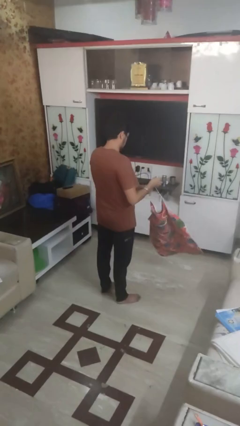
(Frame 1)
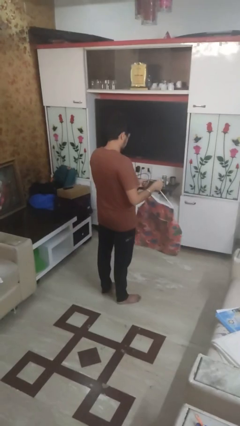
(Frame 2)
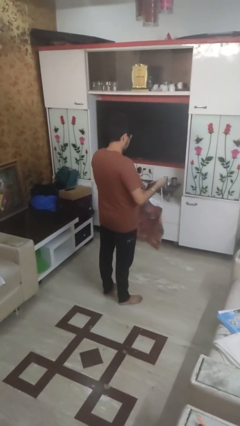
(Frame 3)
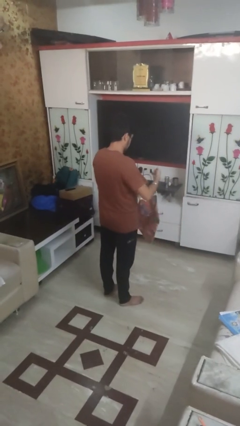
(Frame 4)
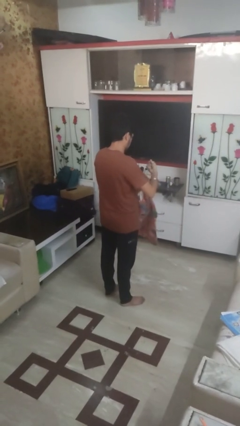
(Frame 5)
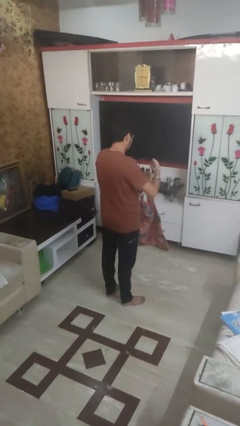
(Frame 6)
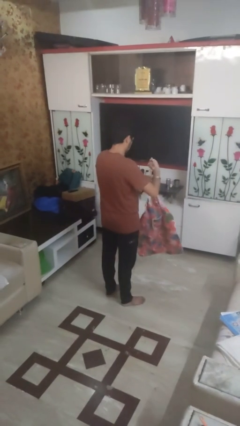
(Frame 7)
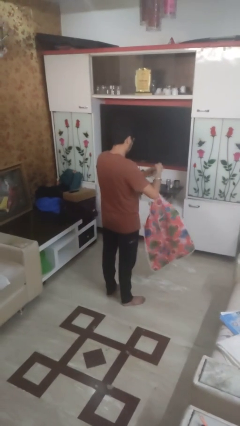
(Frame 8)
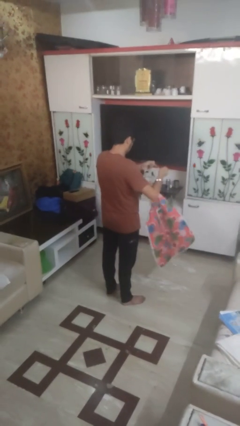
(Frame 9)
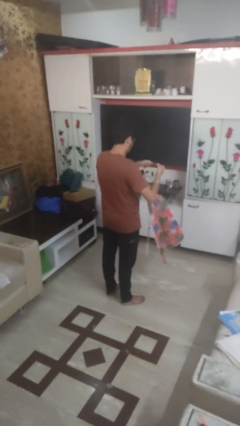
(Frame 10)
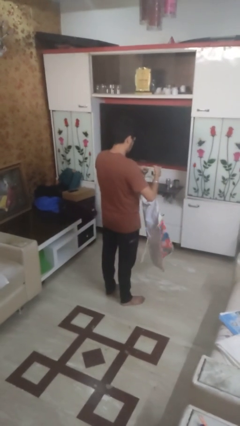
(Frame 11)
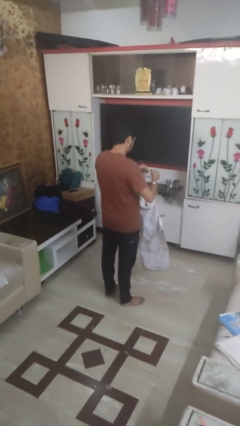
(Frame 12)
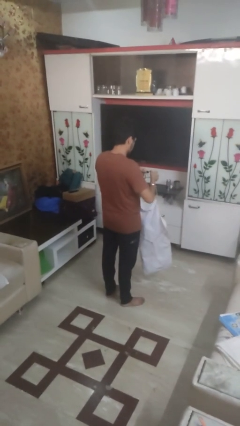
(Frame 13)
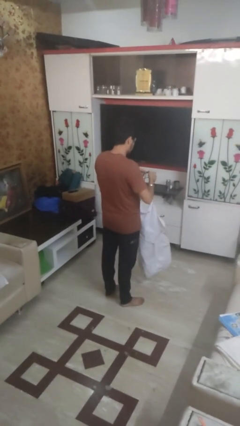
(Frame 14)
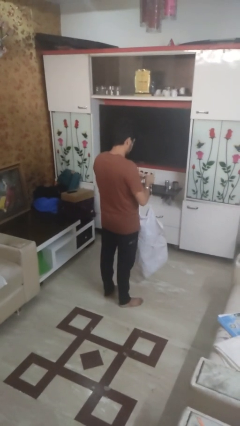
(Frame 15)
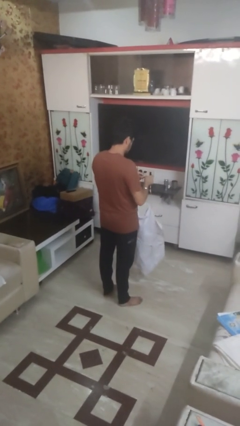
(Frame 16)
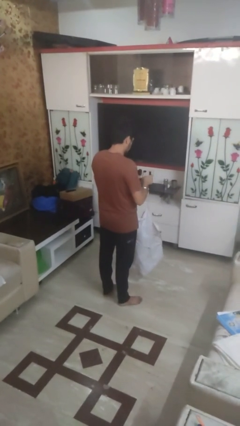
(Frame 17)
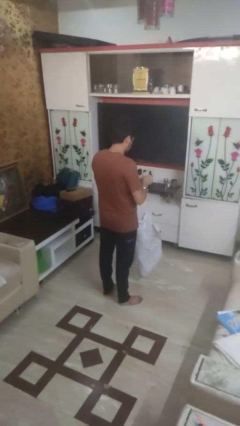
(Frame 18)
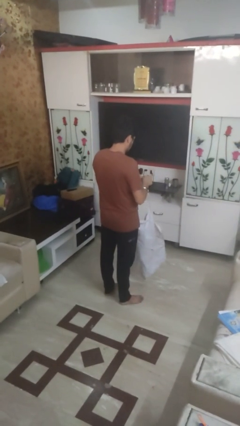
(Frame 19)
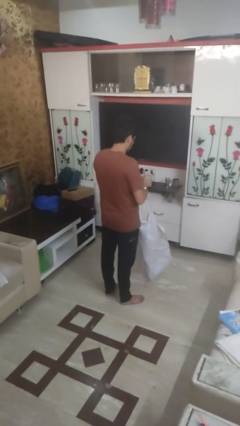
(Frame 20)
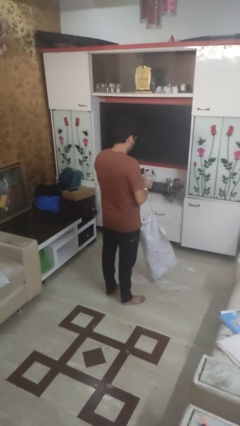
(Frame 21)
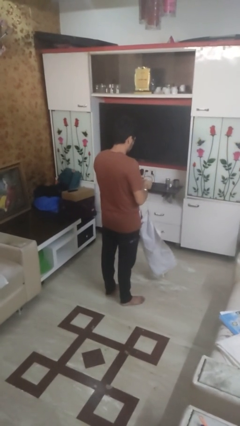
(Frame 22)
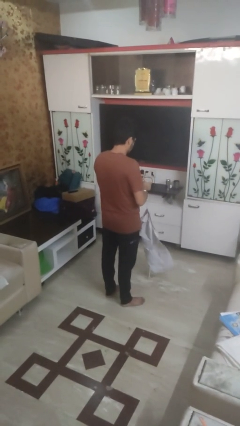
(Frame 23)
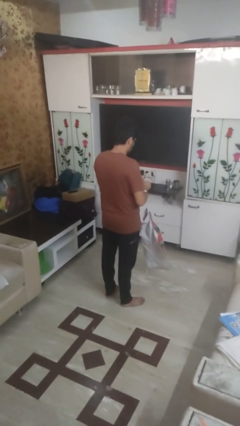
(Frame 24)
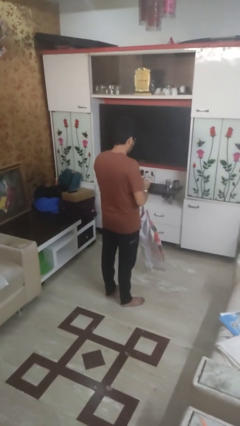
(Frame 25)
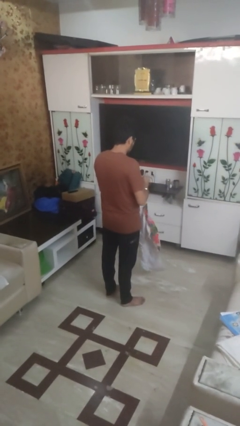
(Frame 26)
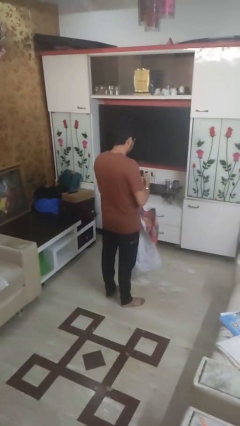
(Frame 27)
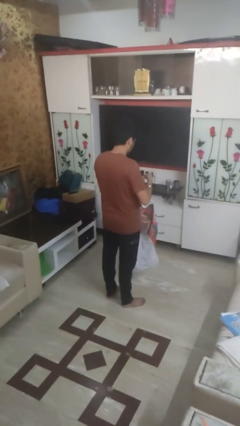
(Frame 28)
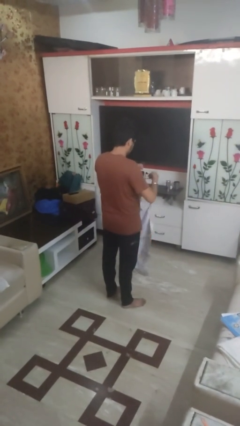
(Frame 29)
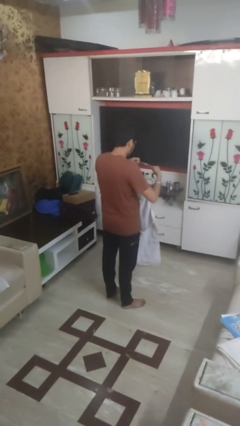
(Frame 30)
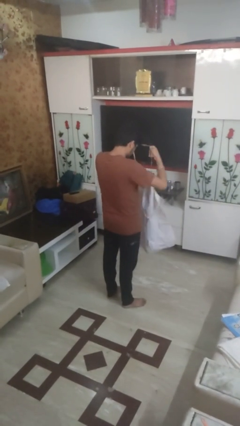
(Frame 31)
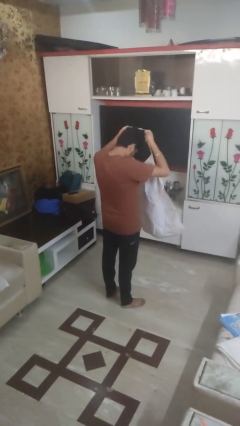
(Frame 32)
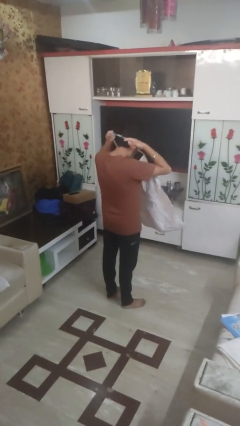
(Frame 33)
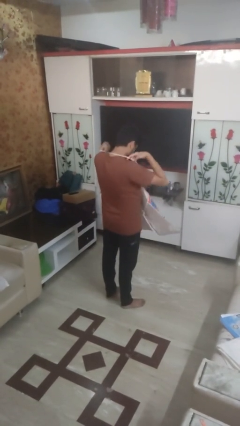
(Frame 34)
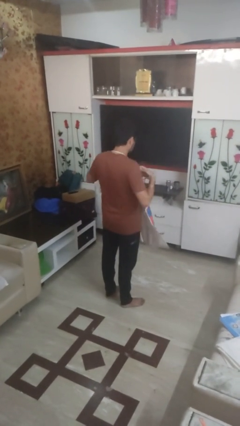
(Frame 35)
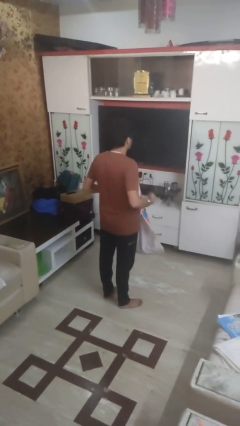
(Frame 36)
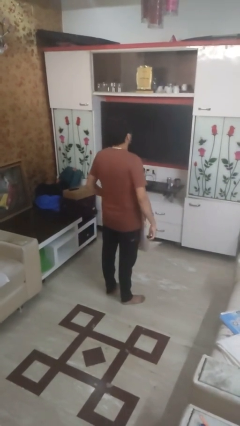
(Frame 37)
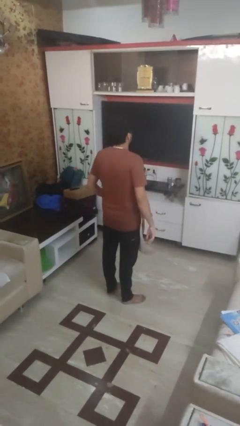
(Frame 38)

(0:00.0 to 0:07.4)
person puts on apron

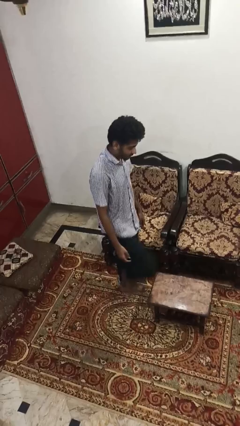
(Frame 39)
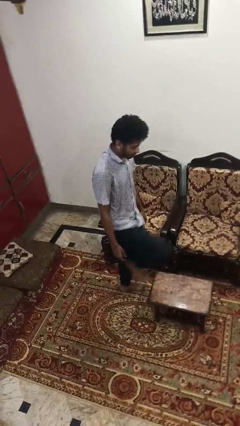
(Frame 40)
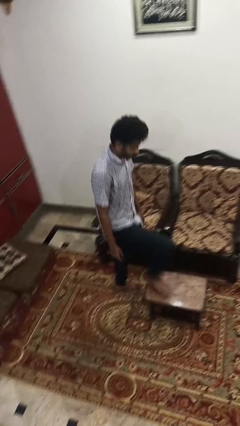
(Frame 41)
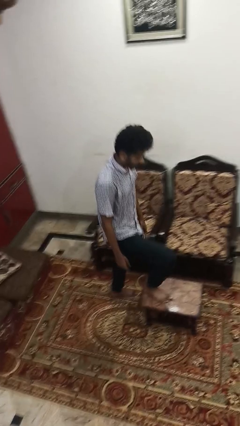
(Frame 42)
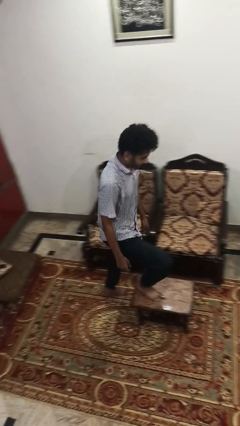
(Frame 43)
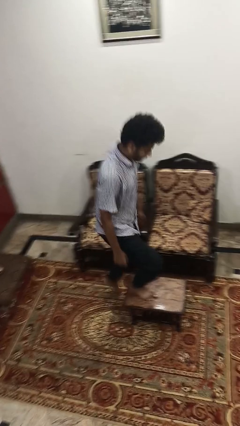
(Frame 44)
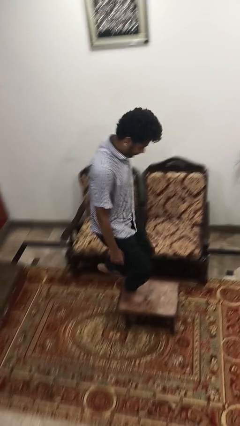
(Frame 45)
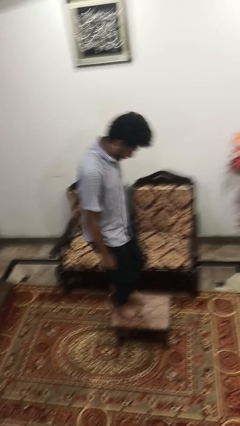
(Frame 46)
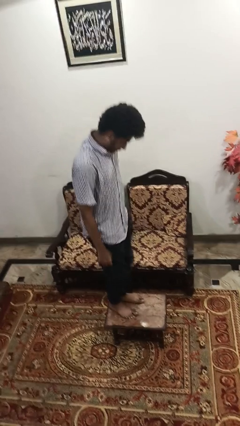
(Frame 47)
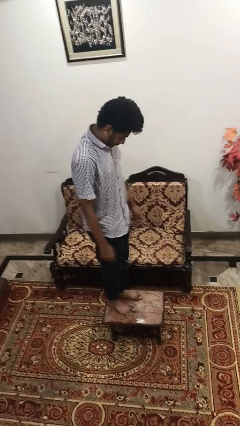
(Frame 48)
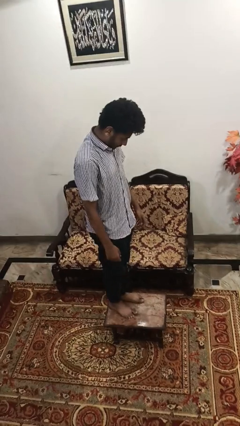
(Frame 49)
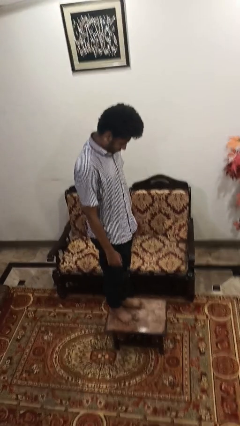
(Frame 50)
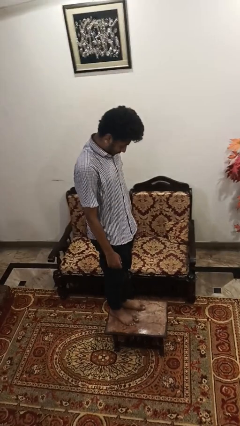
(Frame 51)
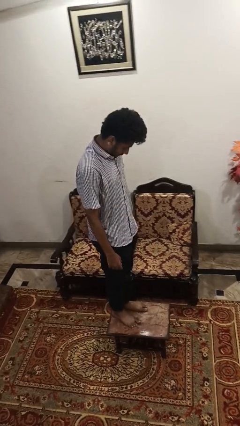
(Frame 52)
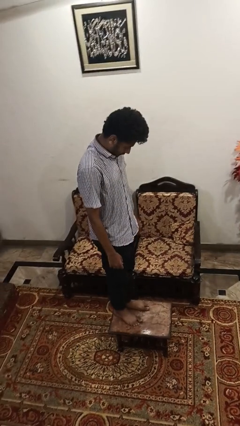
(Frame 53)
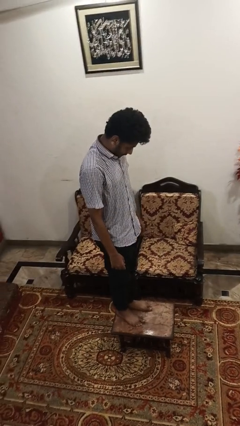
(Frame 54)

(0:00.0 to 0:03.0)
person climbs on table

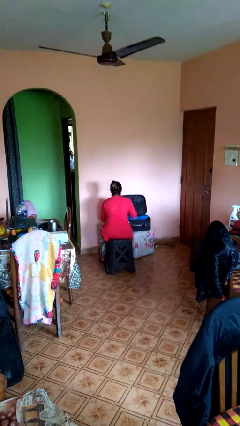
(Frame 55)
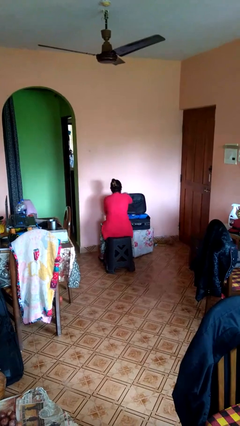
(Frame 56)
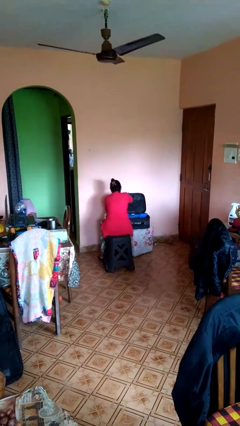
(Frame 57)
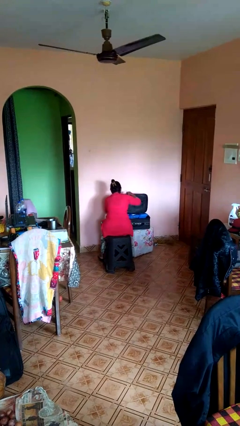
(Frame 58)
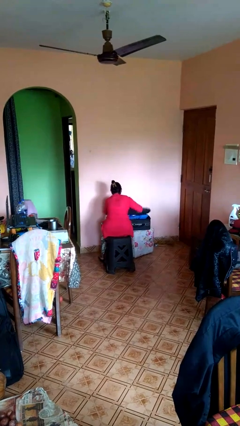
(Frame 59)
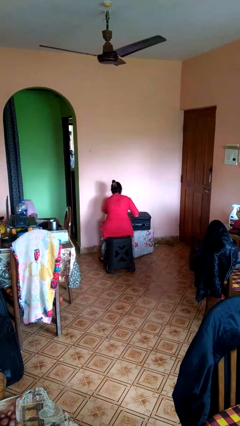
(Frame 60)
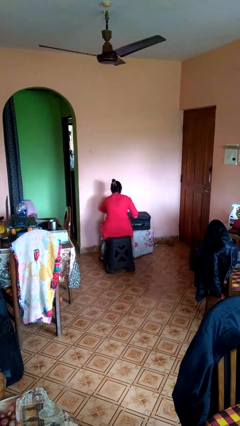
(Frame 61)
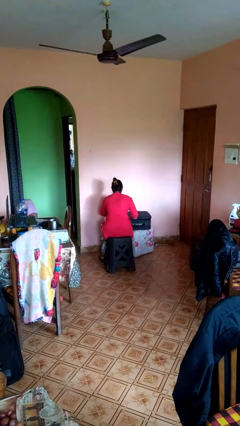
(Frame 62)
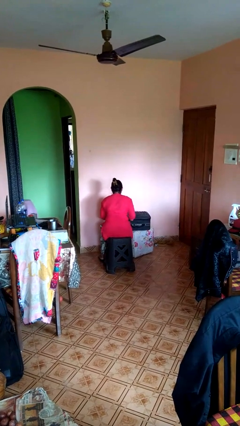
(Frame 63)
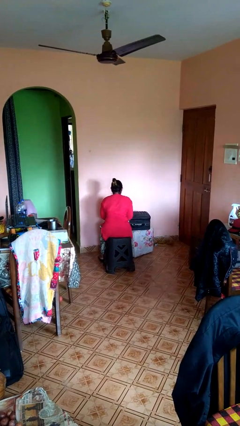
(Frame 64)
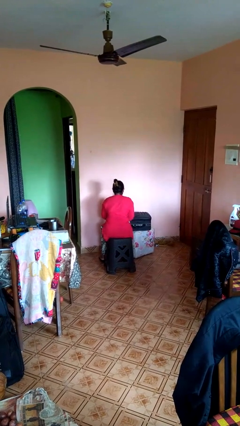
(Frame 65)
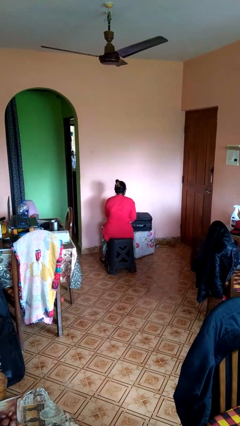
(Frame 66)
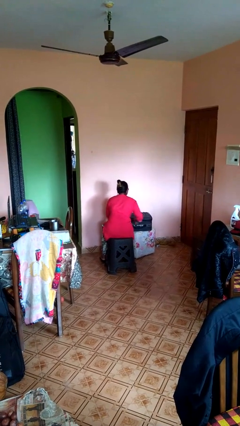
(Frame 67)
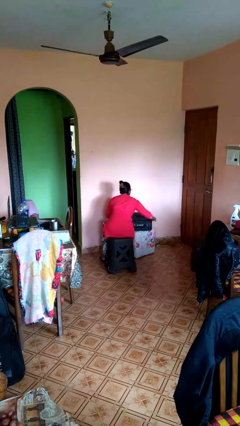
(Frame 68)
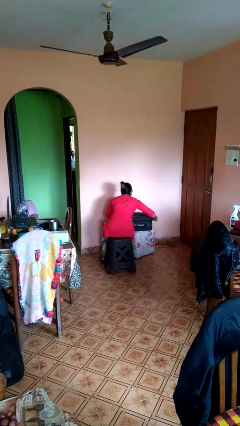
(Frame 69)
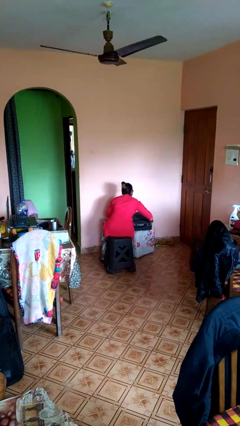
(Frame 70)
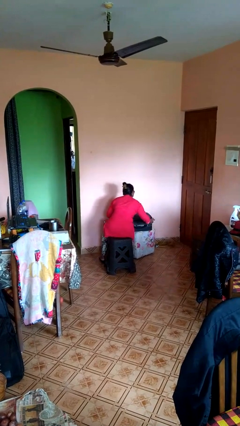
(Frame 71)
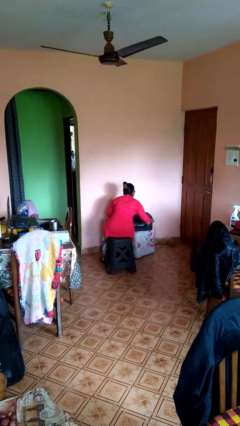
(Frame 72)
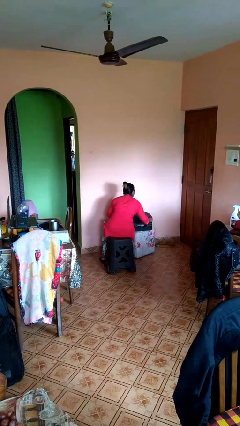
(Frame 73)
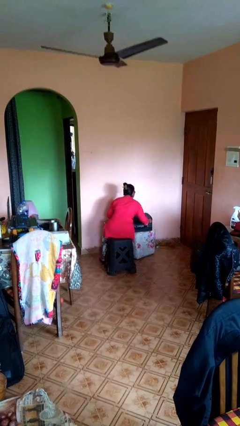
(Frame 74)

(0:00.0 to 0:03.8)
person closes suitcase

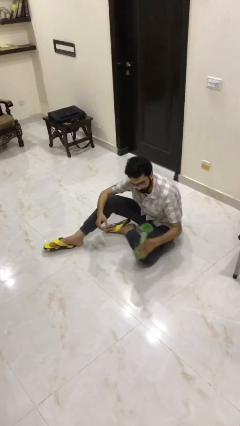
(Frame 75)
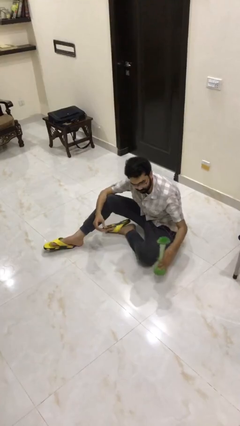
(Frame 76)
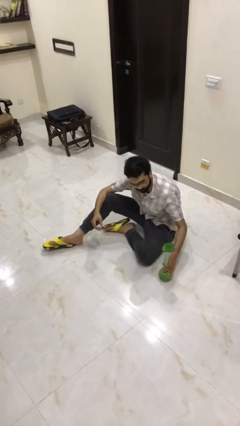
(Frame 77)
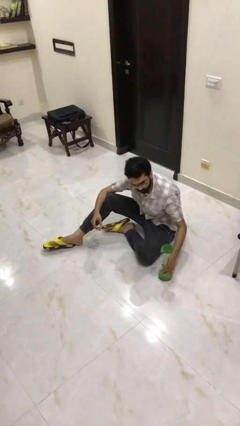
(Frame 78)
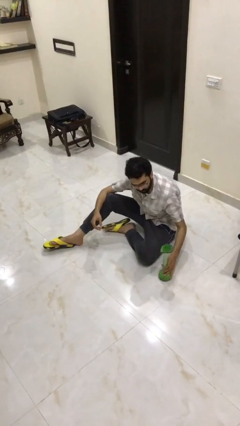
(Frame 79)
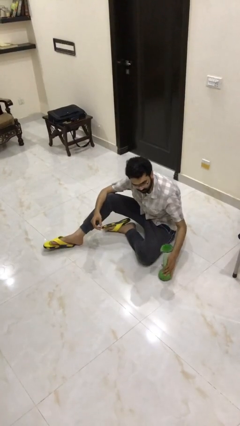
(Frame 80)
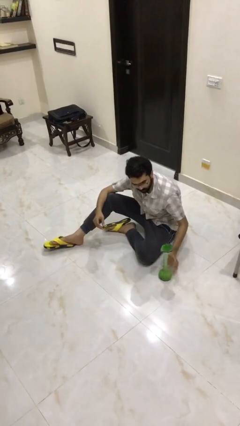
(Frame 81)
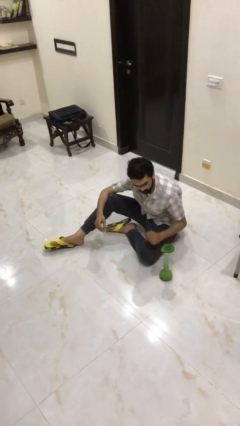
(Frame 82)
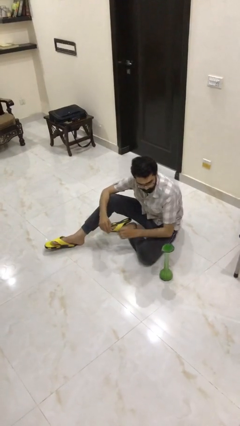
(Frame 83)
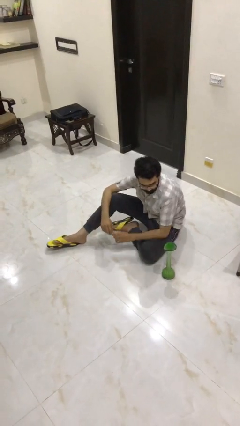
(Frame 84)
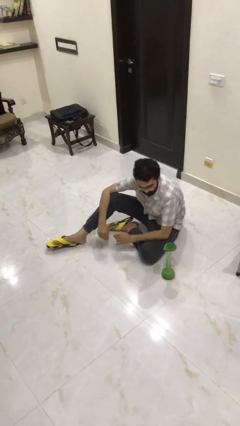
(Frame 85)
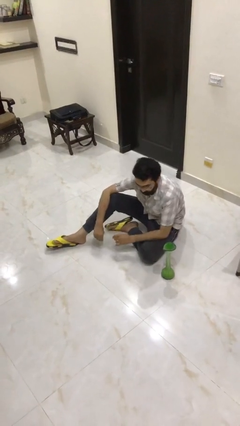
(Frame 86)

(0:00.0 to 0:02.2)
person puts down object on floor

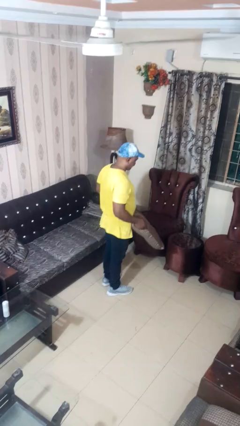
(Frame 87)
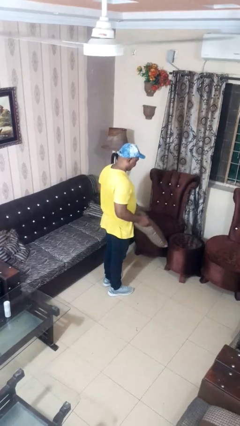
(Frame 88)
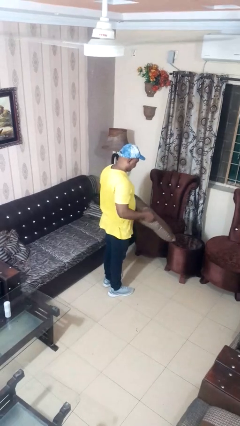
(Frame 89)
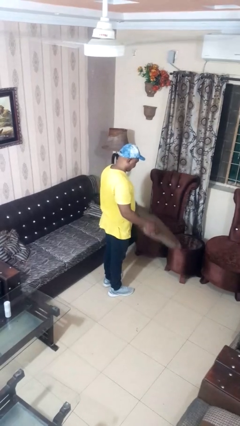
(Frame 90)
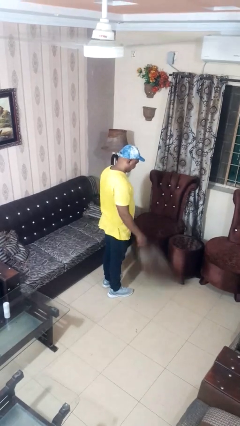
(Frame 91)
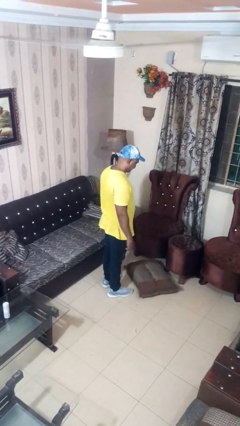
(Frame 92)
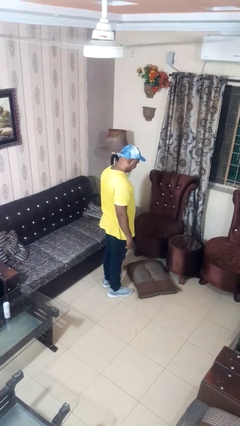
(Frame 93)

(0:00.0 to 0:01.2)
person throws object to ground
